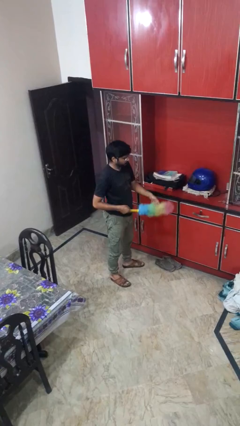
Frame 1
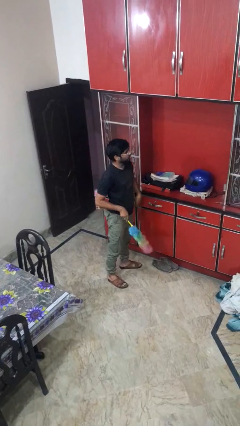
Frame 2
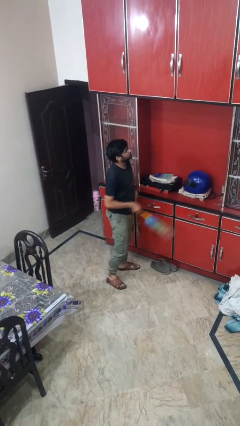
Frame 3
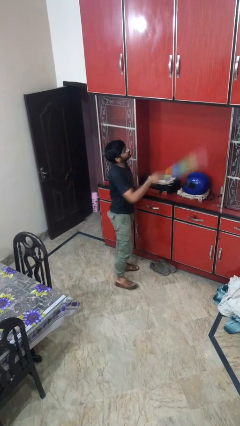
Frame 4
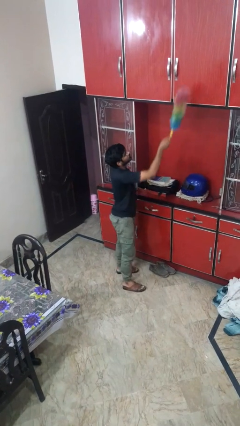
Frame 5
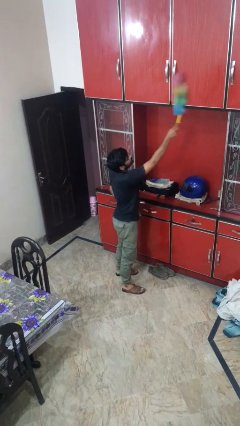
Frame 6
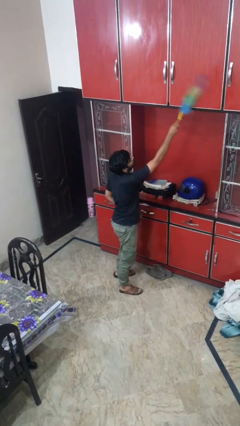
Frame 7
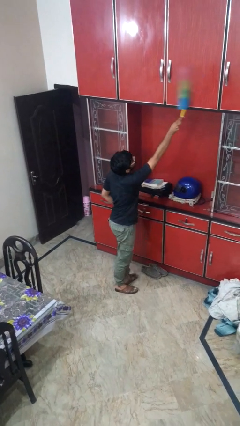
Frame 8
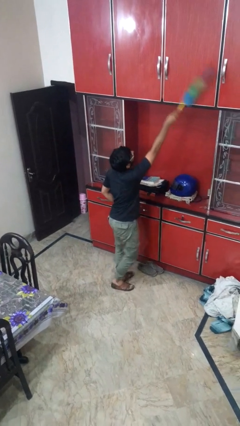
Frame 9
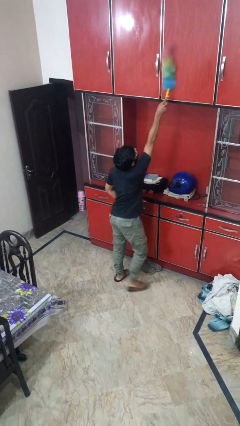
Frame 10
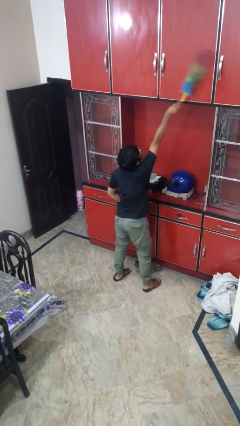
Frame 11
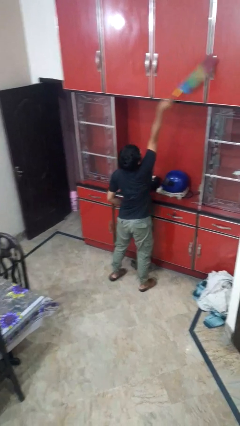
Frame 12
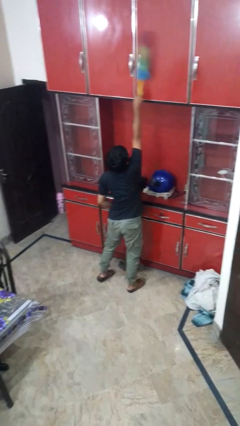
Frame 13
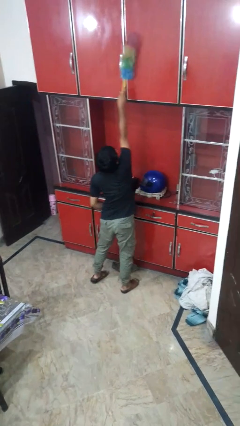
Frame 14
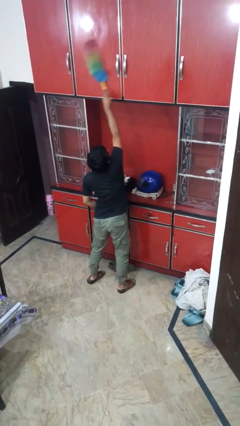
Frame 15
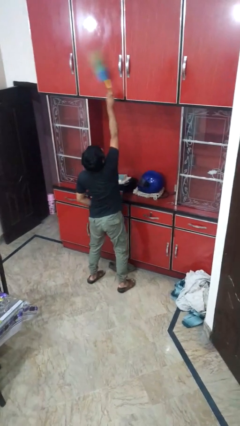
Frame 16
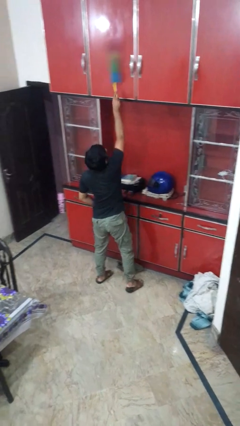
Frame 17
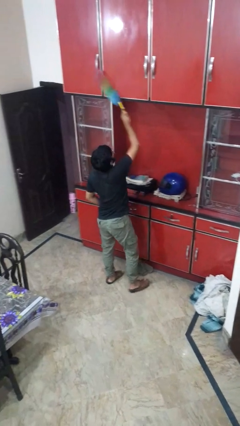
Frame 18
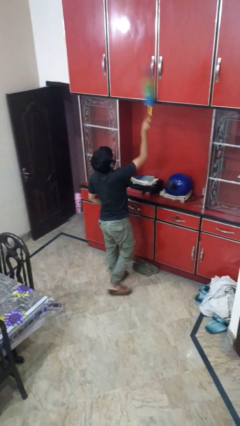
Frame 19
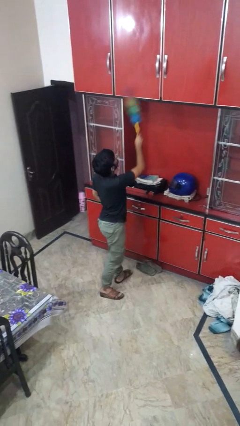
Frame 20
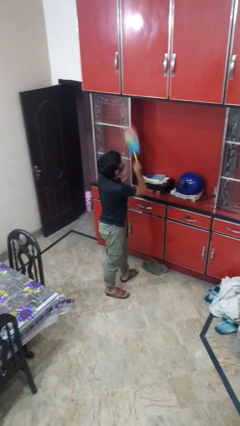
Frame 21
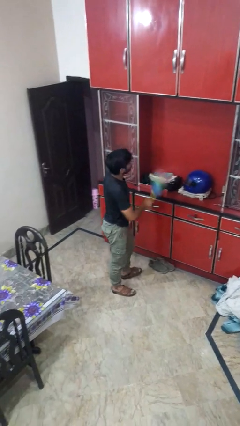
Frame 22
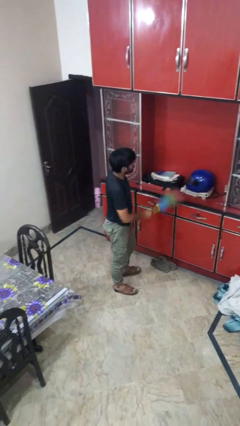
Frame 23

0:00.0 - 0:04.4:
person dusts furniture

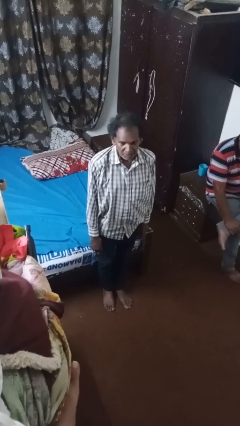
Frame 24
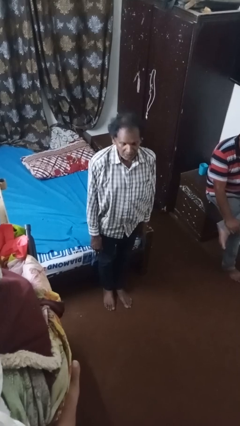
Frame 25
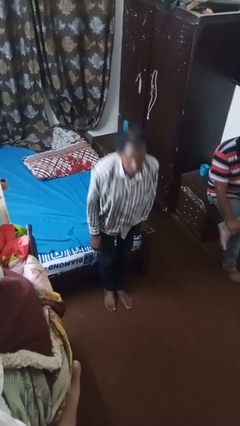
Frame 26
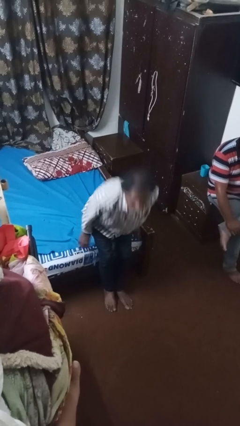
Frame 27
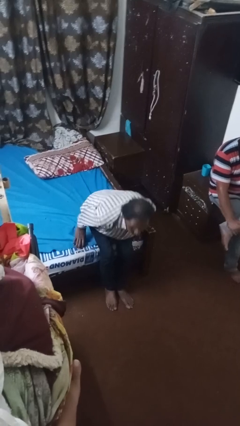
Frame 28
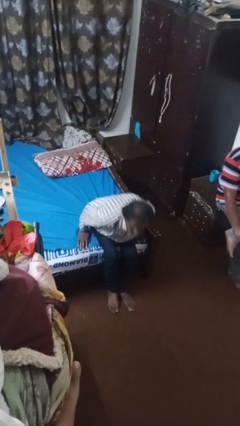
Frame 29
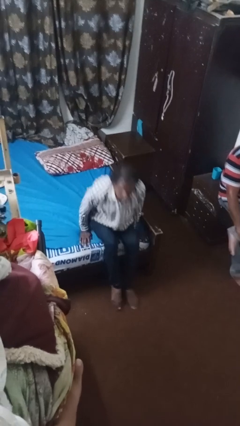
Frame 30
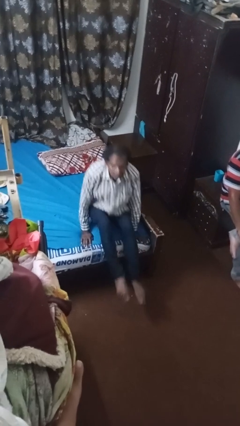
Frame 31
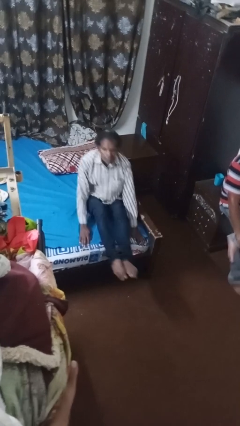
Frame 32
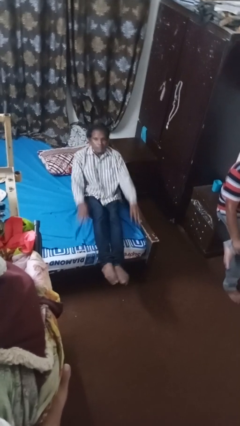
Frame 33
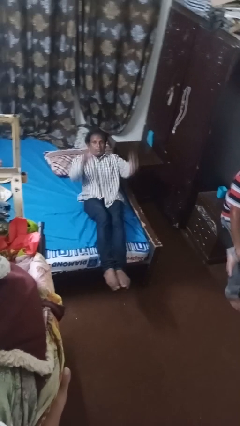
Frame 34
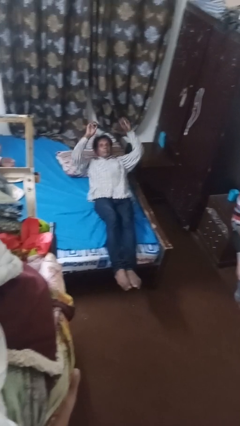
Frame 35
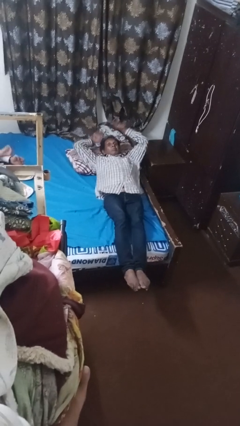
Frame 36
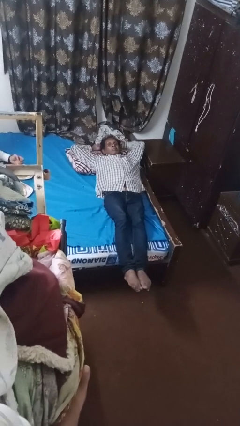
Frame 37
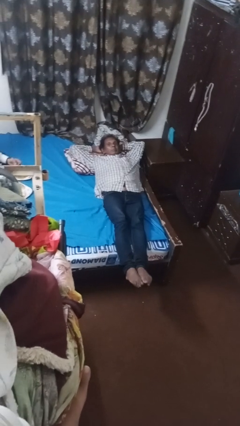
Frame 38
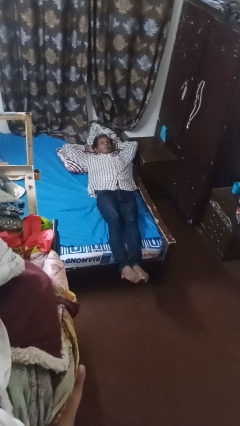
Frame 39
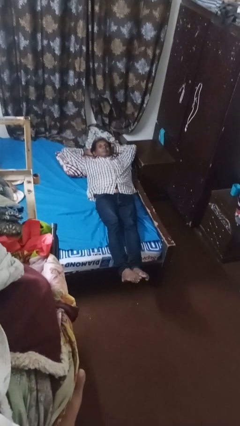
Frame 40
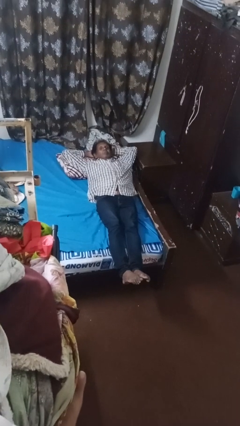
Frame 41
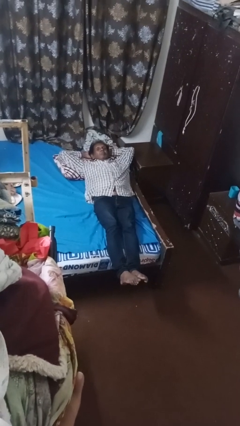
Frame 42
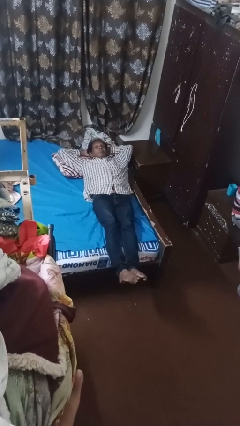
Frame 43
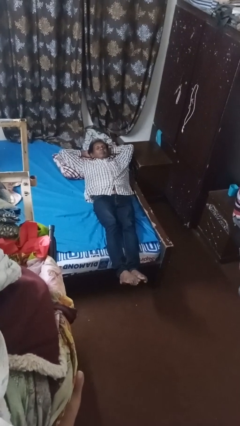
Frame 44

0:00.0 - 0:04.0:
person lies down on bed

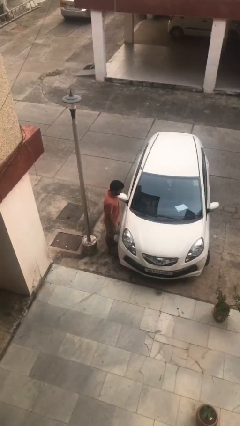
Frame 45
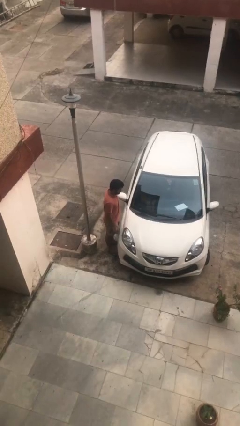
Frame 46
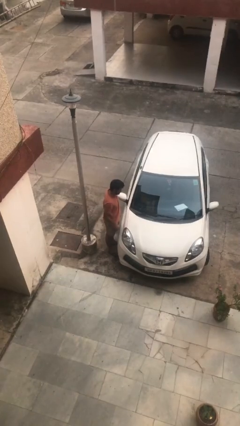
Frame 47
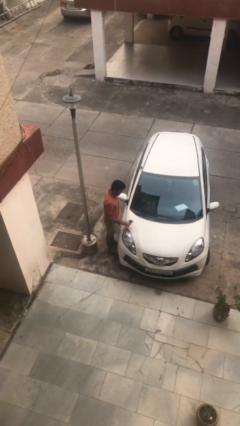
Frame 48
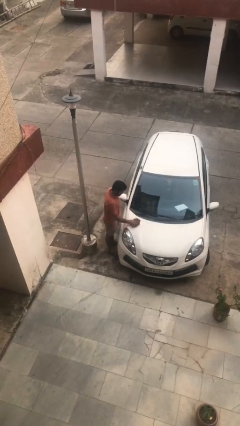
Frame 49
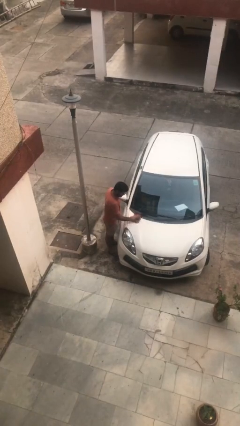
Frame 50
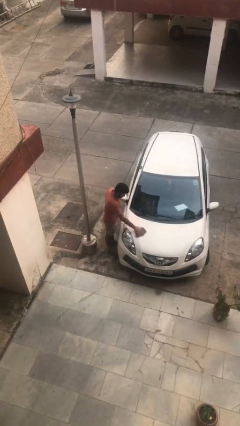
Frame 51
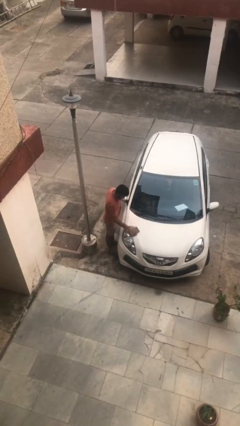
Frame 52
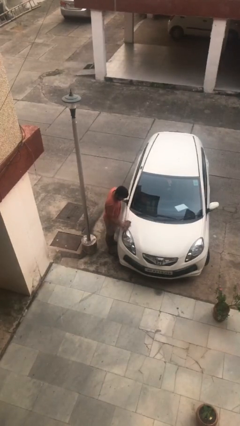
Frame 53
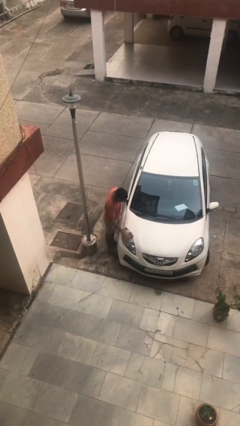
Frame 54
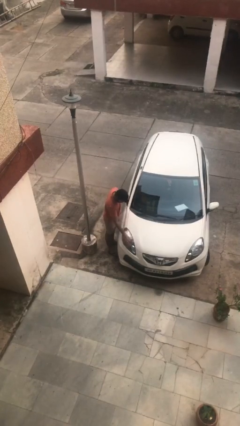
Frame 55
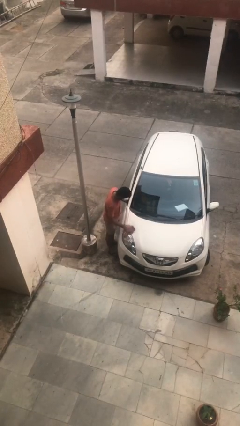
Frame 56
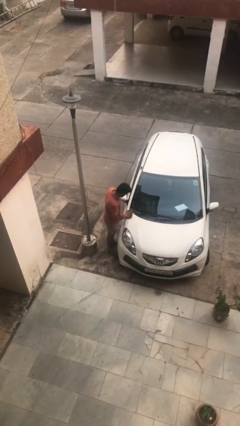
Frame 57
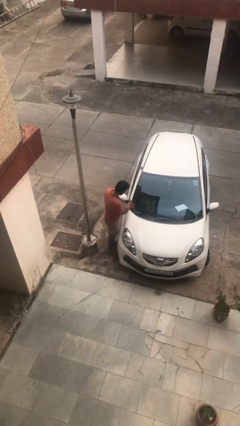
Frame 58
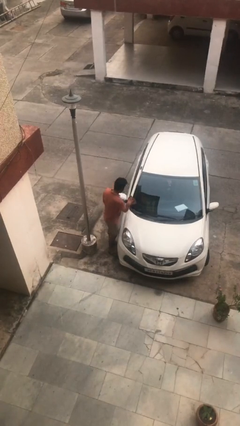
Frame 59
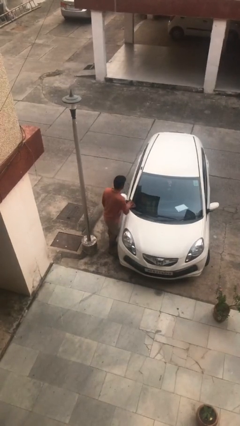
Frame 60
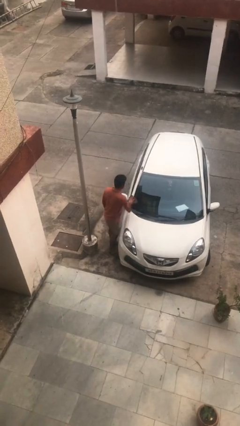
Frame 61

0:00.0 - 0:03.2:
person polishes car with rag

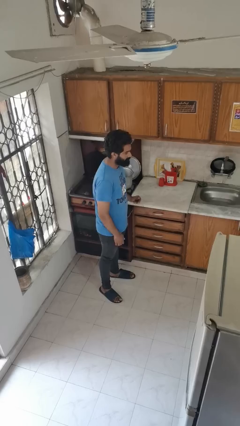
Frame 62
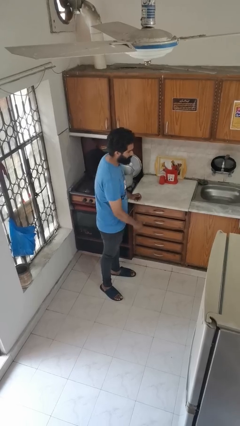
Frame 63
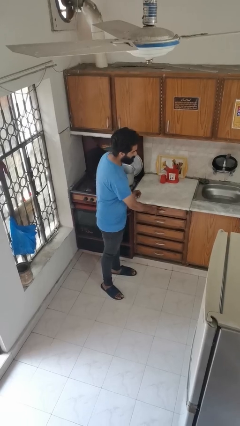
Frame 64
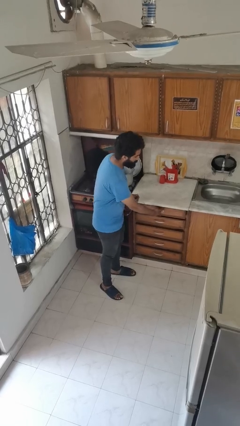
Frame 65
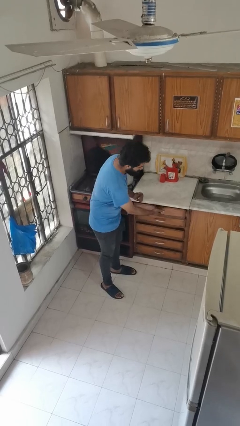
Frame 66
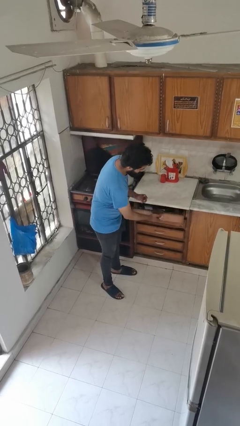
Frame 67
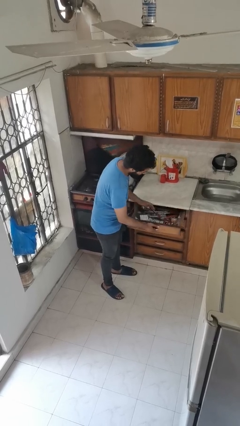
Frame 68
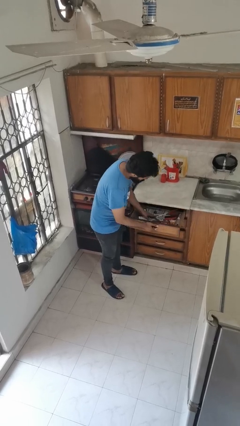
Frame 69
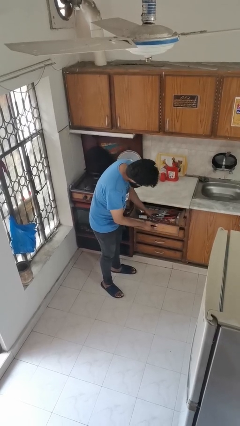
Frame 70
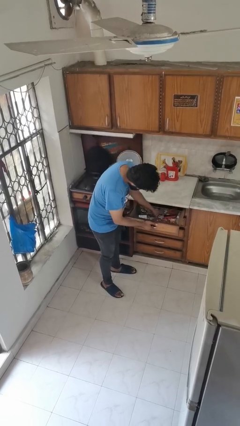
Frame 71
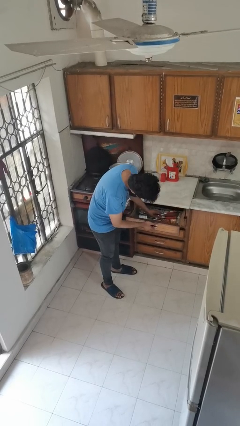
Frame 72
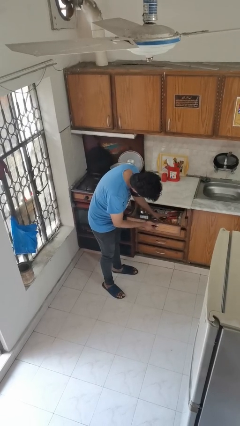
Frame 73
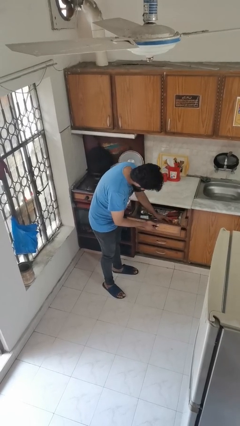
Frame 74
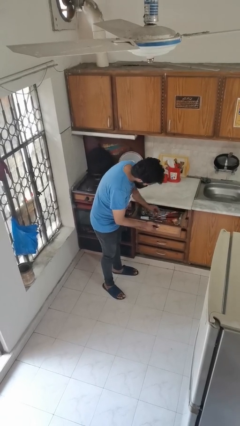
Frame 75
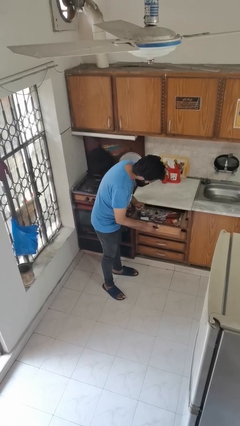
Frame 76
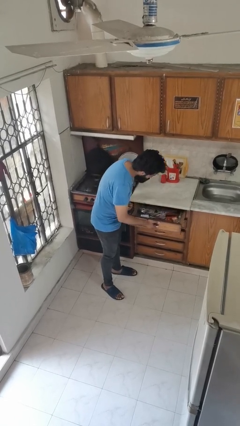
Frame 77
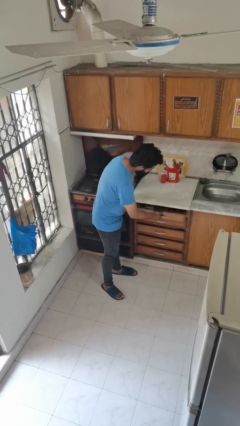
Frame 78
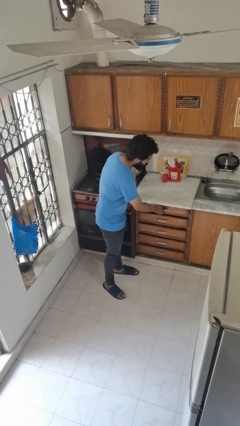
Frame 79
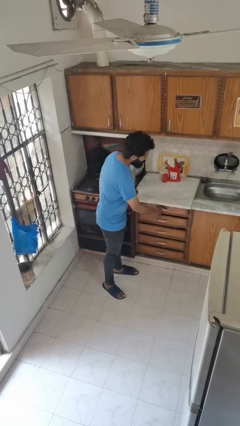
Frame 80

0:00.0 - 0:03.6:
person searches in kitchen drawer

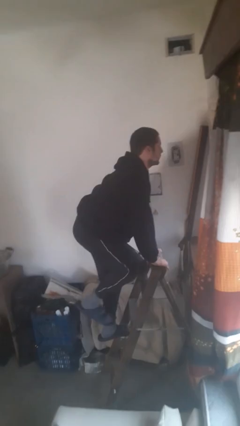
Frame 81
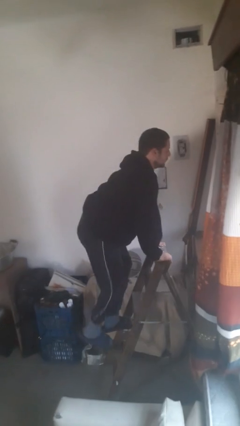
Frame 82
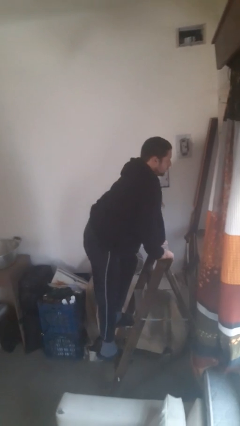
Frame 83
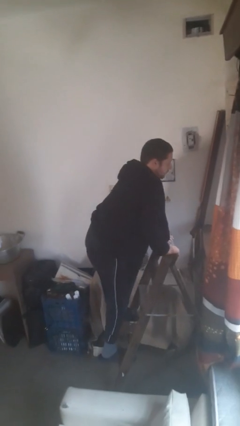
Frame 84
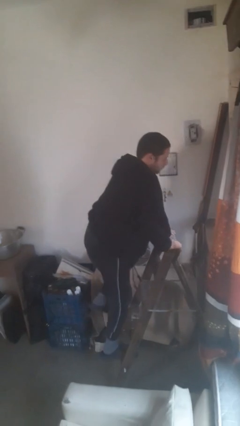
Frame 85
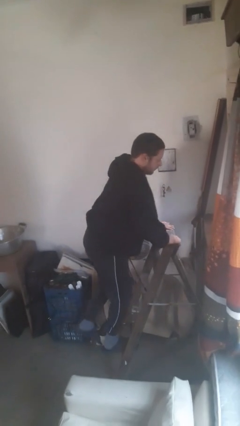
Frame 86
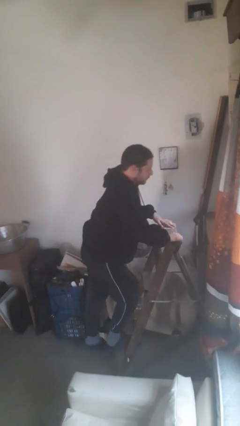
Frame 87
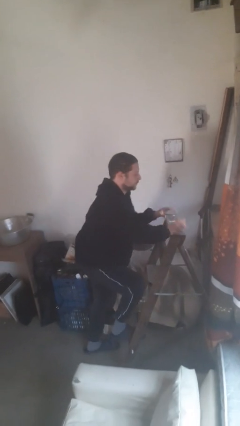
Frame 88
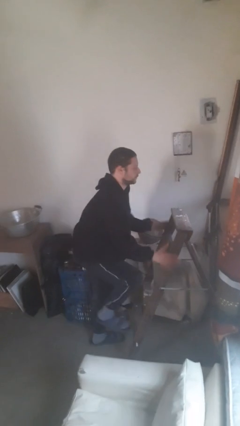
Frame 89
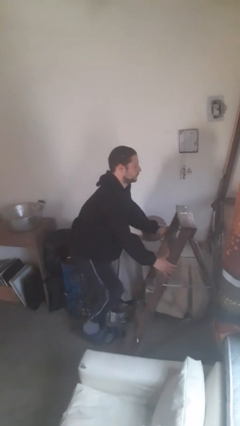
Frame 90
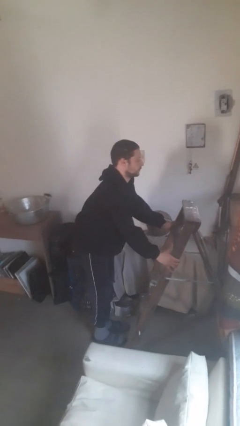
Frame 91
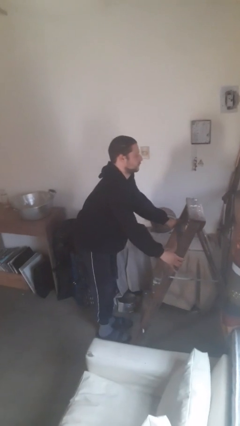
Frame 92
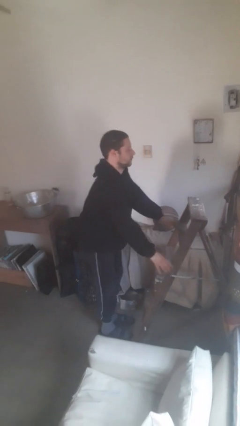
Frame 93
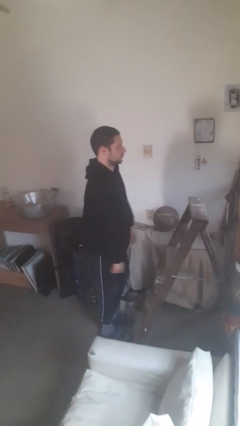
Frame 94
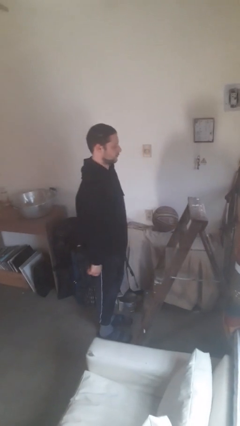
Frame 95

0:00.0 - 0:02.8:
person climbs down ladder
